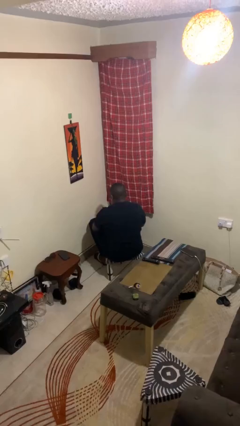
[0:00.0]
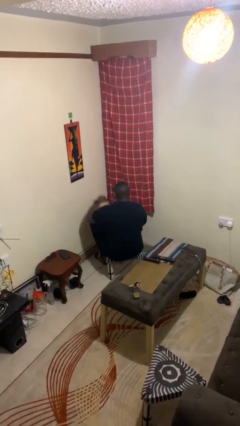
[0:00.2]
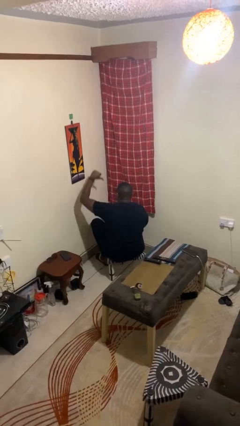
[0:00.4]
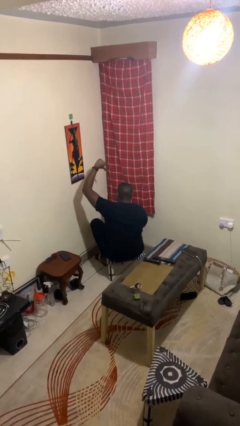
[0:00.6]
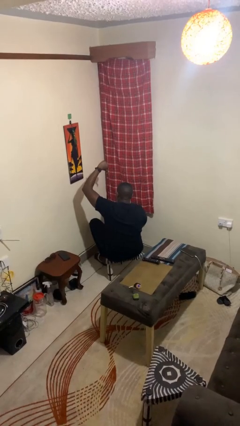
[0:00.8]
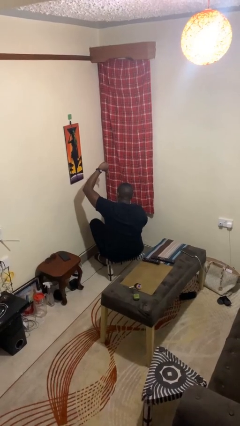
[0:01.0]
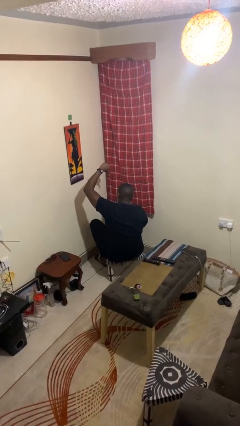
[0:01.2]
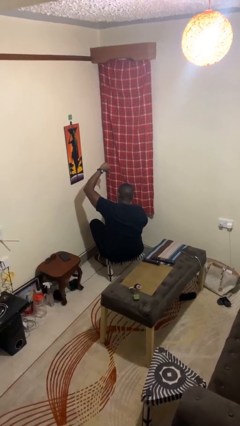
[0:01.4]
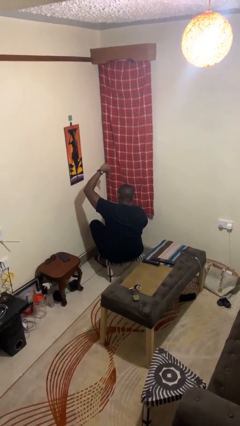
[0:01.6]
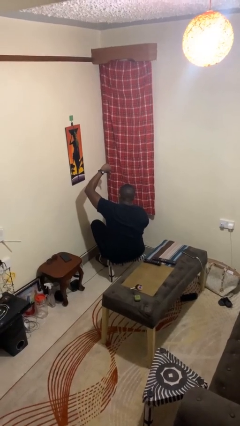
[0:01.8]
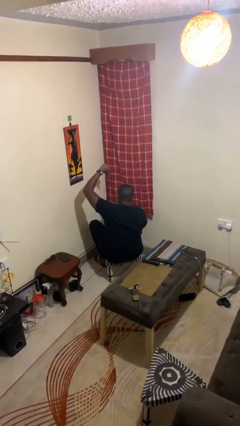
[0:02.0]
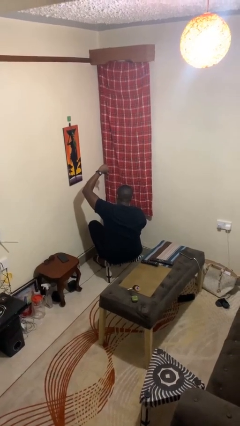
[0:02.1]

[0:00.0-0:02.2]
person gestures thumbs down

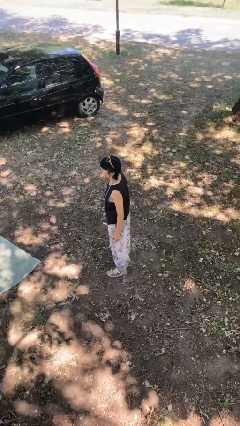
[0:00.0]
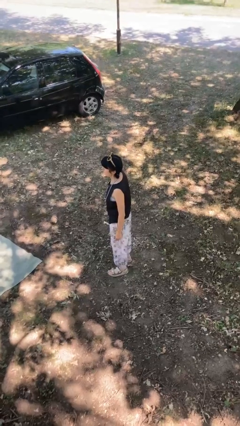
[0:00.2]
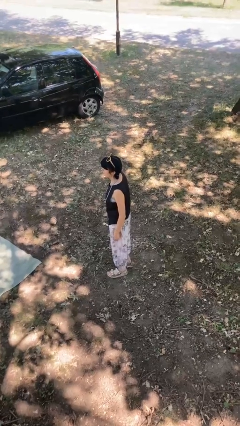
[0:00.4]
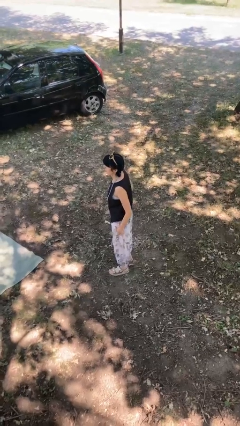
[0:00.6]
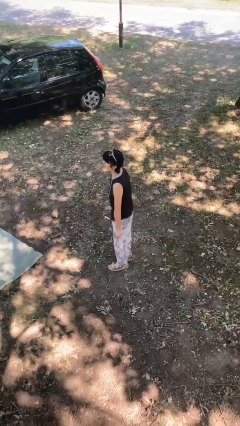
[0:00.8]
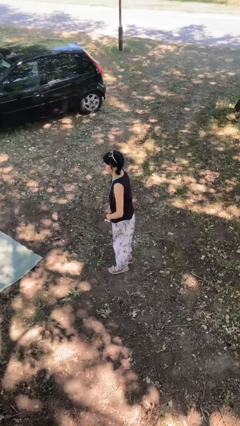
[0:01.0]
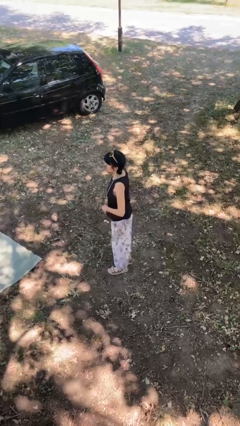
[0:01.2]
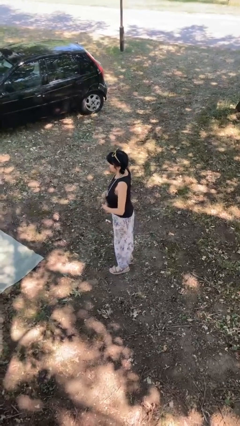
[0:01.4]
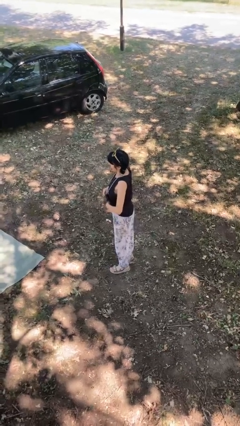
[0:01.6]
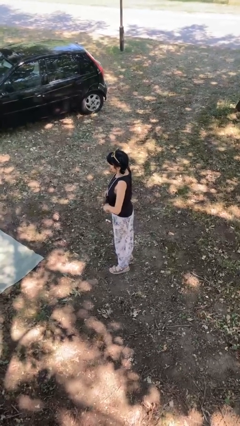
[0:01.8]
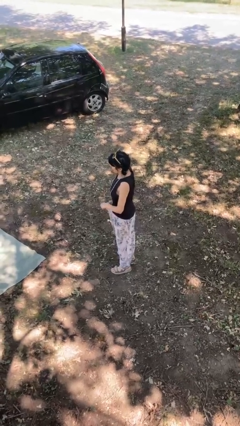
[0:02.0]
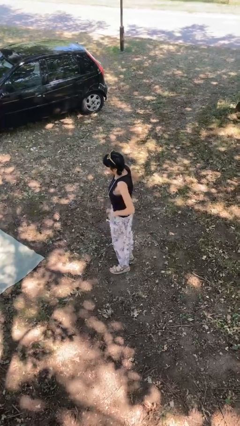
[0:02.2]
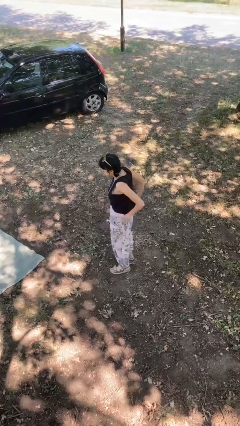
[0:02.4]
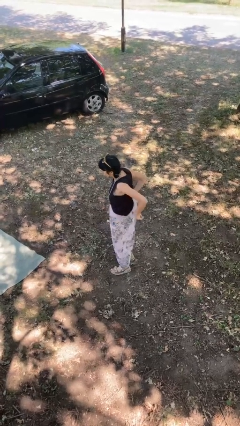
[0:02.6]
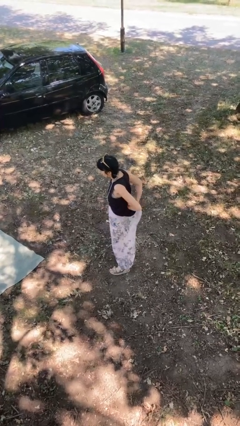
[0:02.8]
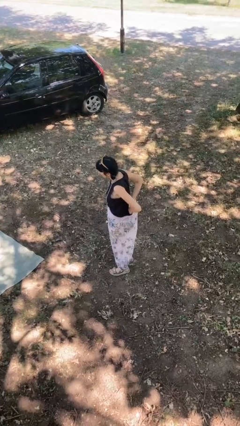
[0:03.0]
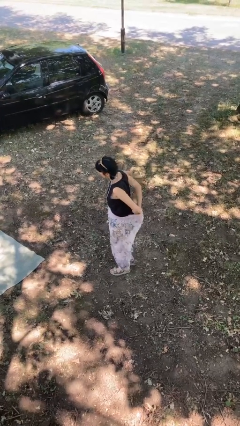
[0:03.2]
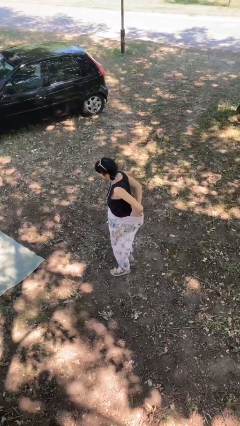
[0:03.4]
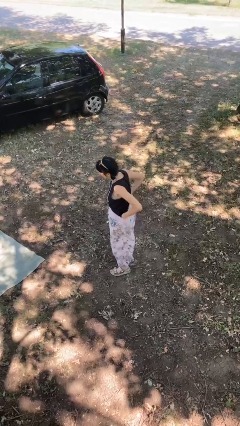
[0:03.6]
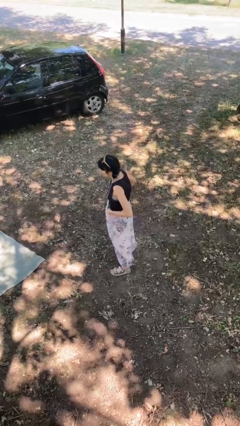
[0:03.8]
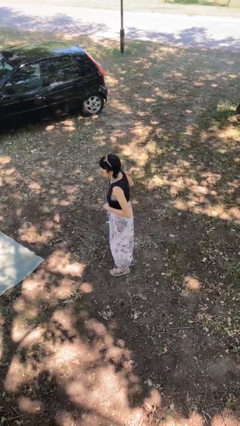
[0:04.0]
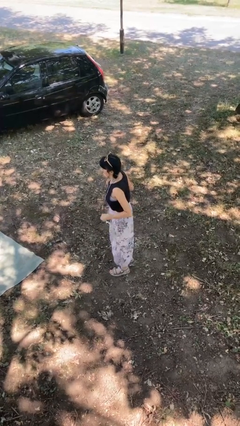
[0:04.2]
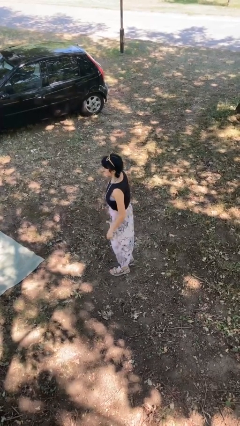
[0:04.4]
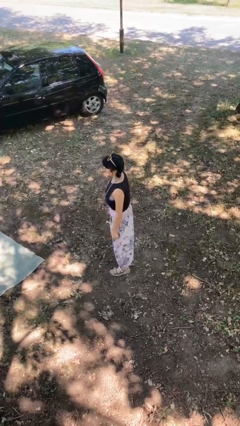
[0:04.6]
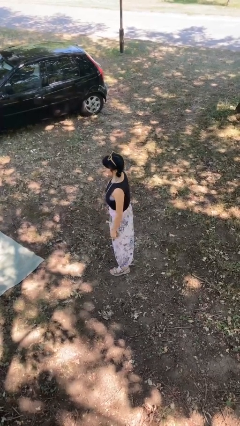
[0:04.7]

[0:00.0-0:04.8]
person tucks in shirt

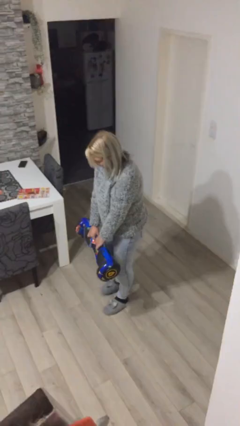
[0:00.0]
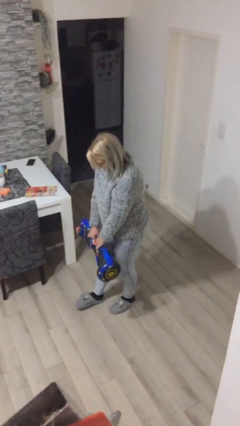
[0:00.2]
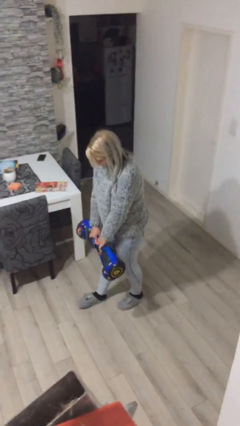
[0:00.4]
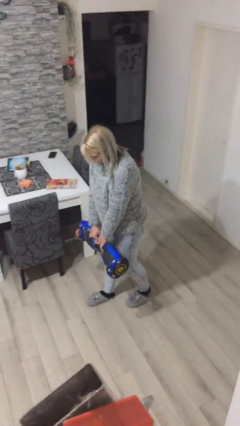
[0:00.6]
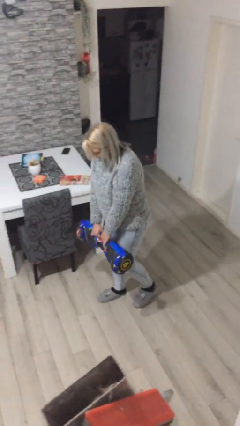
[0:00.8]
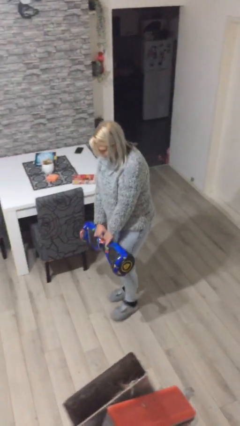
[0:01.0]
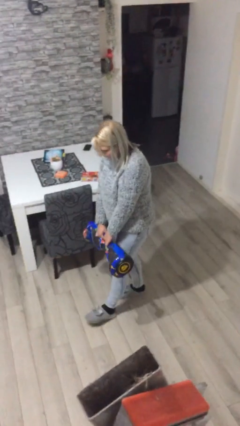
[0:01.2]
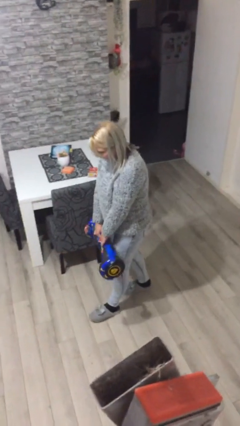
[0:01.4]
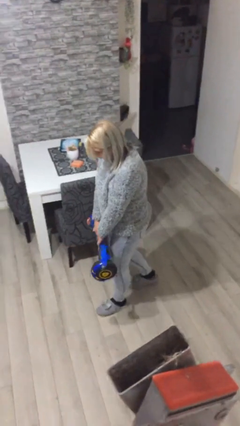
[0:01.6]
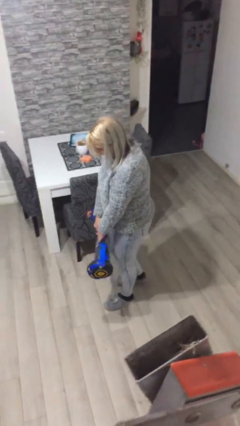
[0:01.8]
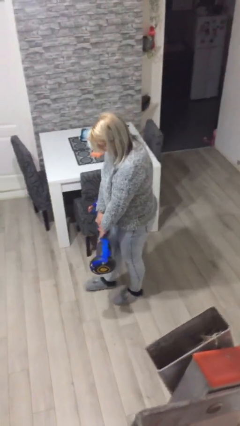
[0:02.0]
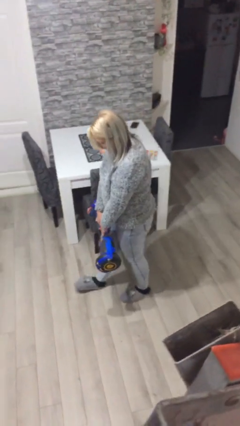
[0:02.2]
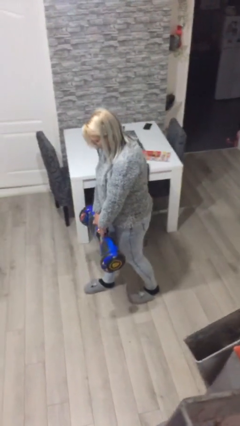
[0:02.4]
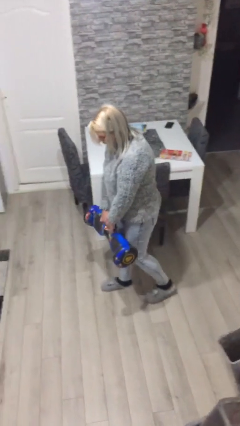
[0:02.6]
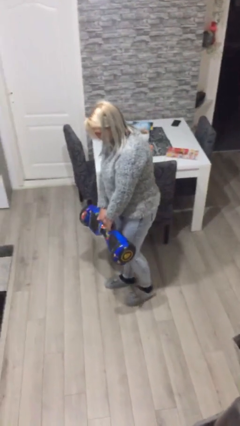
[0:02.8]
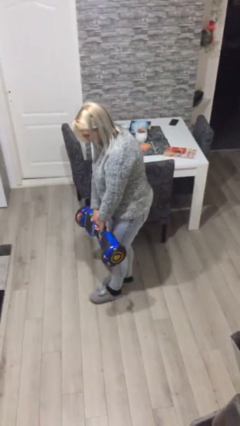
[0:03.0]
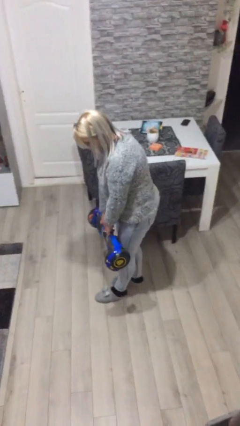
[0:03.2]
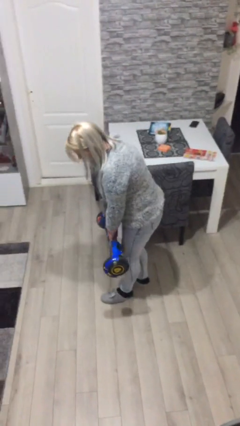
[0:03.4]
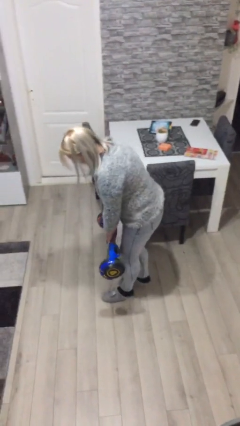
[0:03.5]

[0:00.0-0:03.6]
person carries heavy object

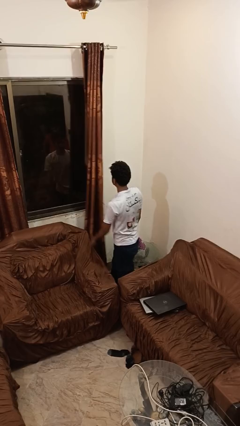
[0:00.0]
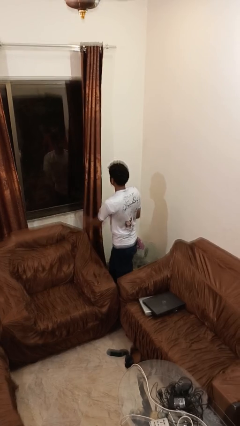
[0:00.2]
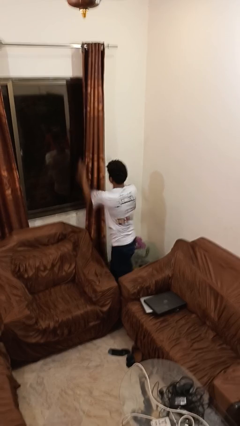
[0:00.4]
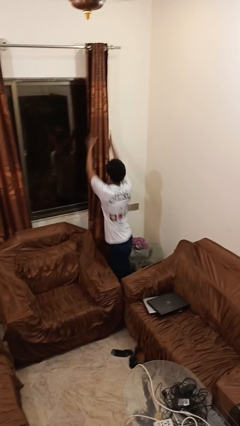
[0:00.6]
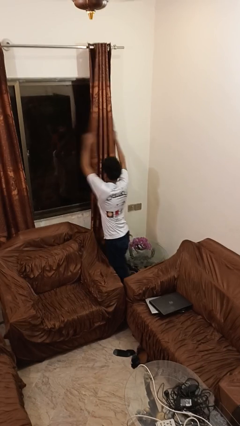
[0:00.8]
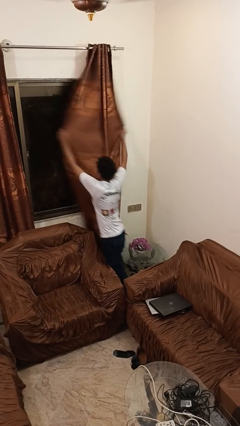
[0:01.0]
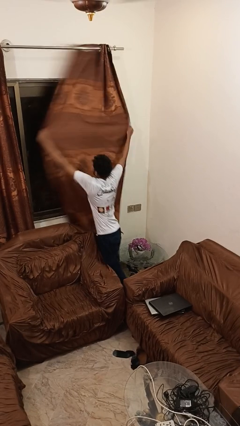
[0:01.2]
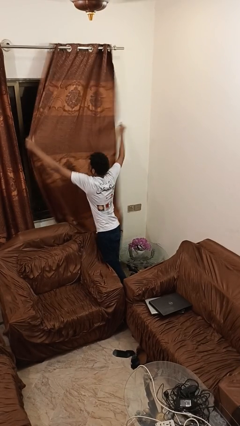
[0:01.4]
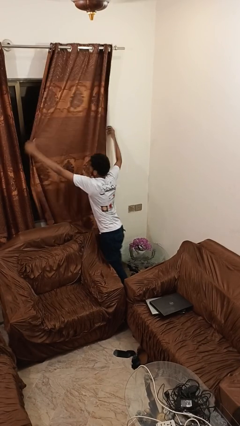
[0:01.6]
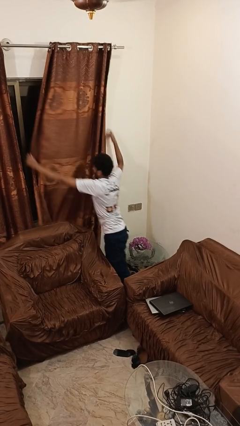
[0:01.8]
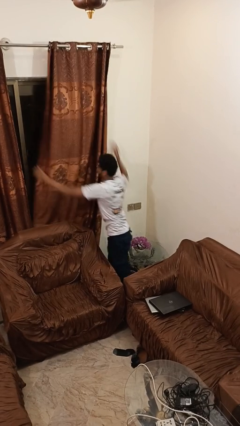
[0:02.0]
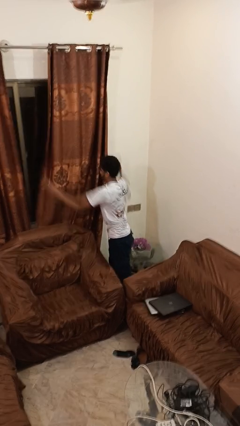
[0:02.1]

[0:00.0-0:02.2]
person closes curtains

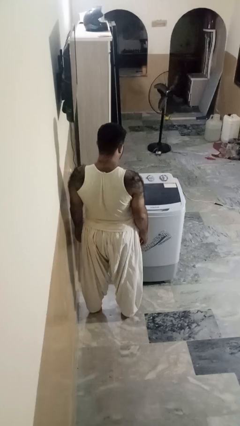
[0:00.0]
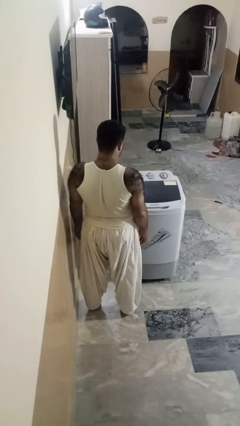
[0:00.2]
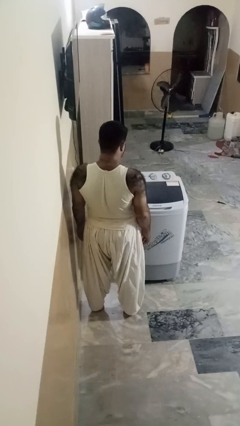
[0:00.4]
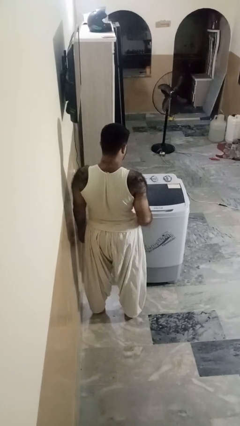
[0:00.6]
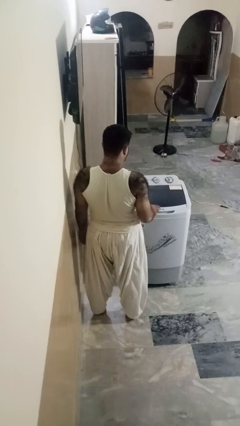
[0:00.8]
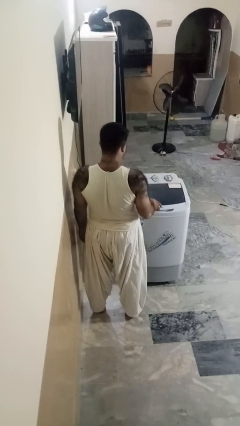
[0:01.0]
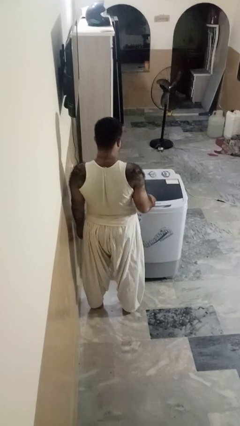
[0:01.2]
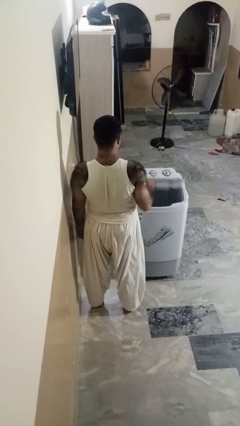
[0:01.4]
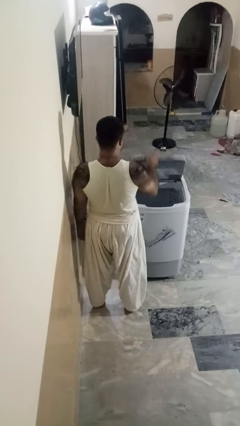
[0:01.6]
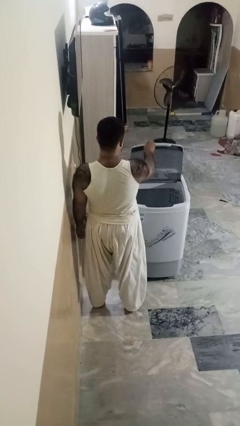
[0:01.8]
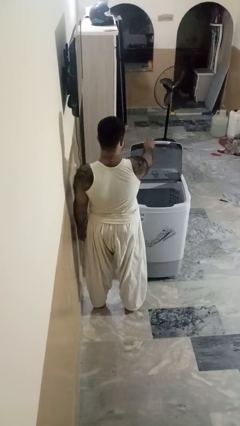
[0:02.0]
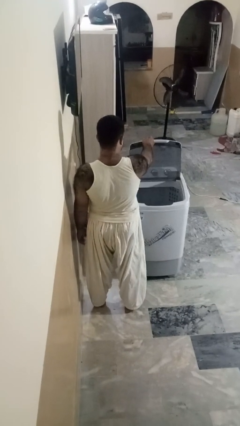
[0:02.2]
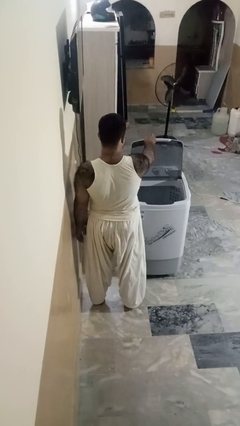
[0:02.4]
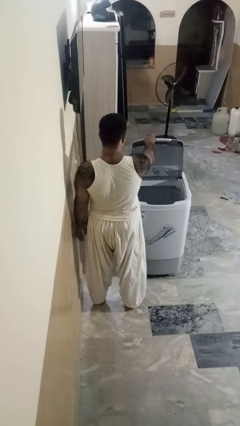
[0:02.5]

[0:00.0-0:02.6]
person opens clothes washer

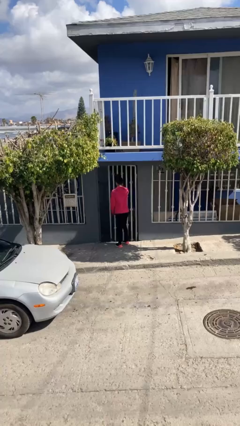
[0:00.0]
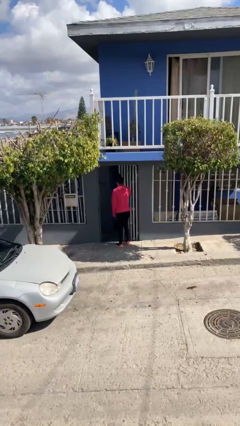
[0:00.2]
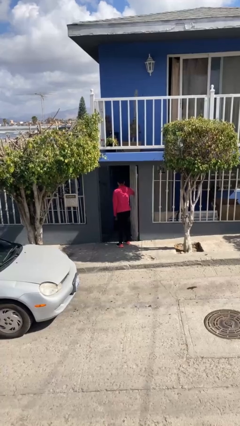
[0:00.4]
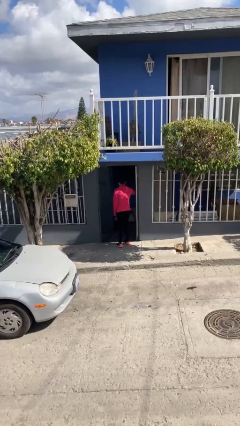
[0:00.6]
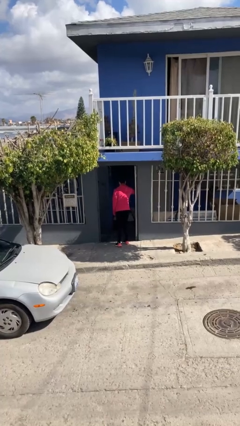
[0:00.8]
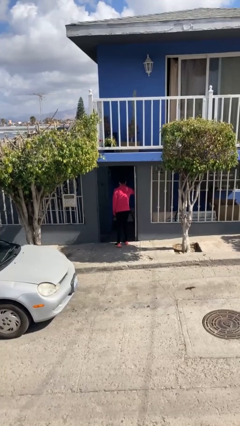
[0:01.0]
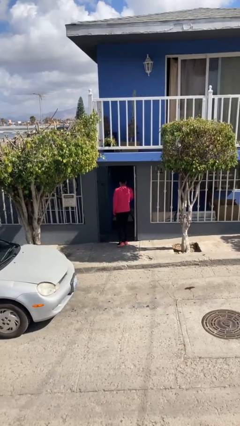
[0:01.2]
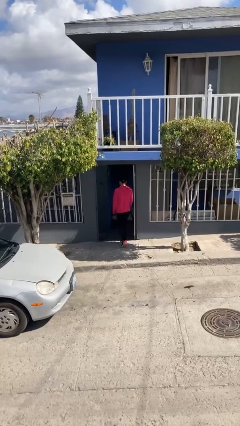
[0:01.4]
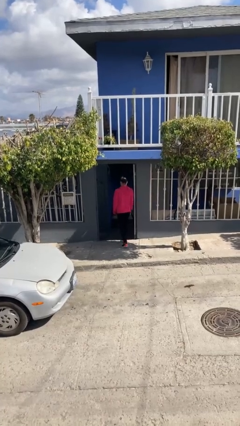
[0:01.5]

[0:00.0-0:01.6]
person opens facility door

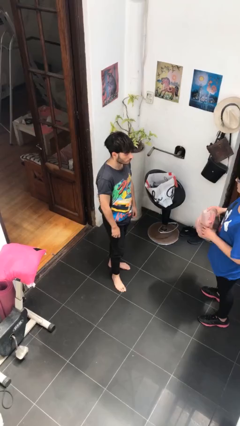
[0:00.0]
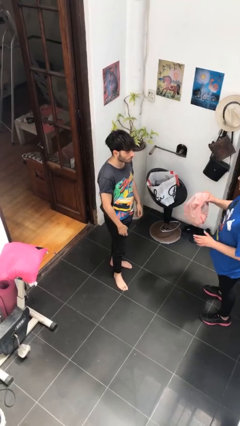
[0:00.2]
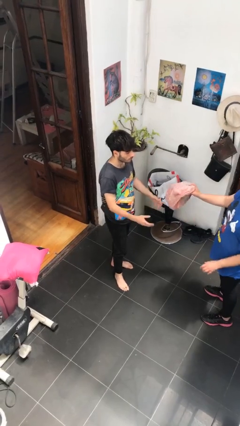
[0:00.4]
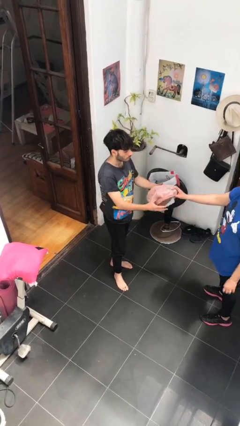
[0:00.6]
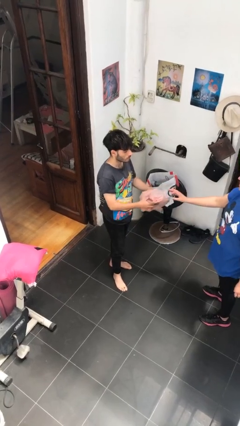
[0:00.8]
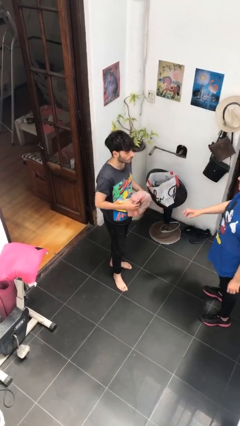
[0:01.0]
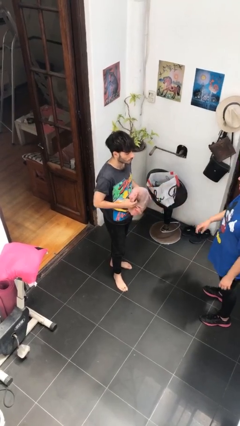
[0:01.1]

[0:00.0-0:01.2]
person transfers object to person
